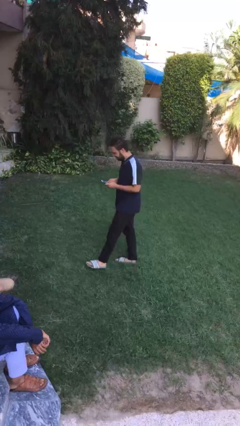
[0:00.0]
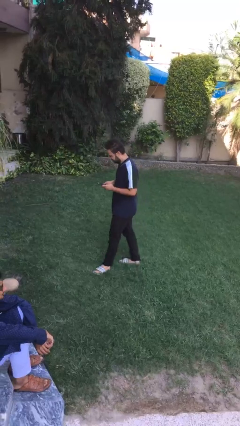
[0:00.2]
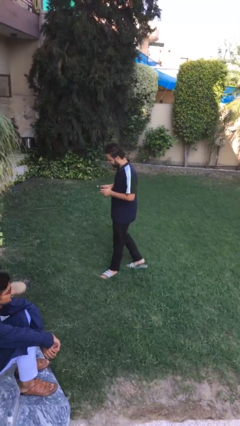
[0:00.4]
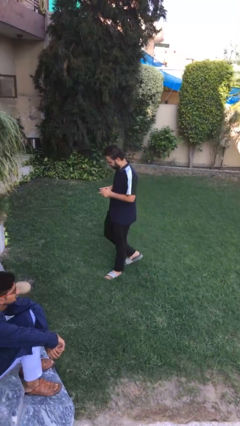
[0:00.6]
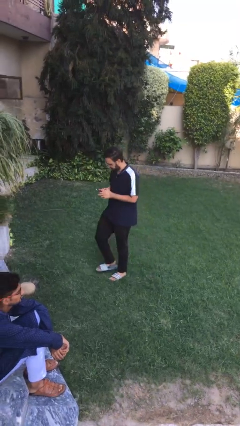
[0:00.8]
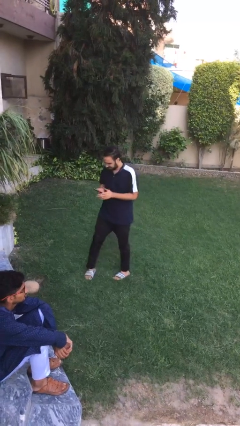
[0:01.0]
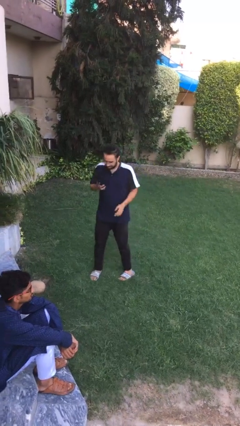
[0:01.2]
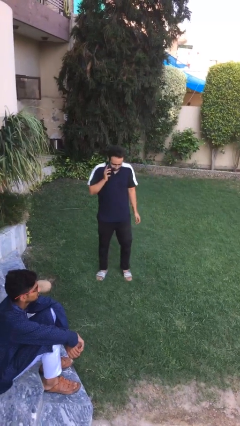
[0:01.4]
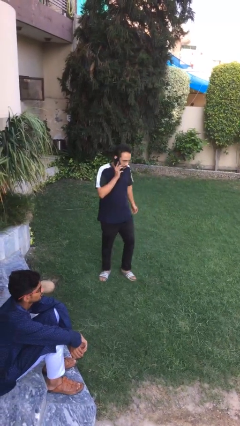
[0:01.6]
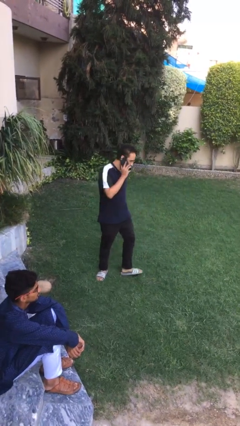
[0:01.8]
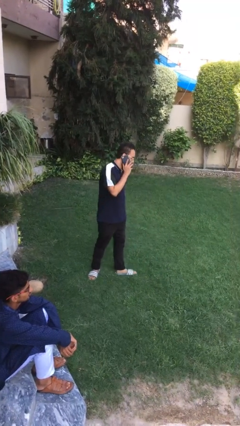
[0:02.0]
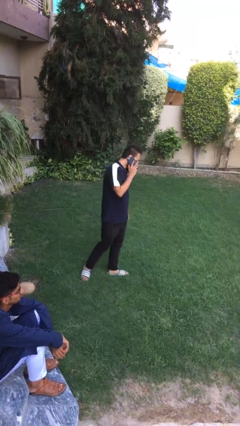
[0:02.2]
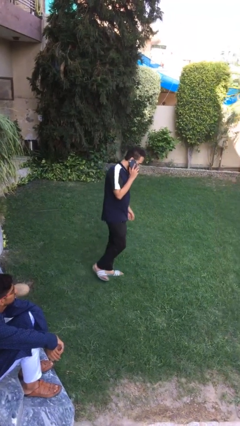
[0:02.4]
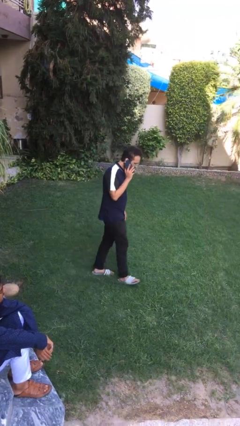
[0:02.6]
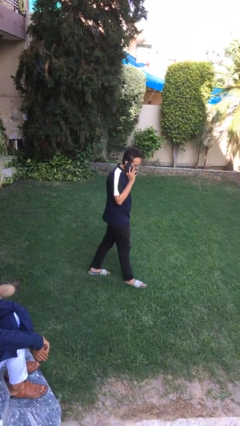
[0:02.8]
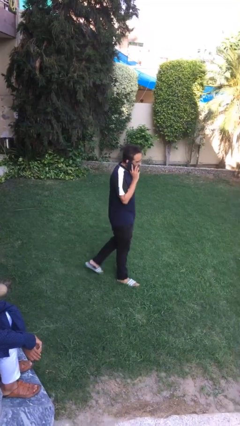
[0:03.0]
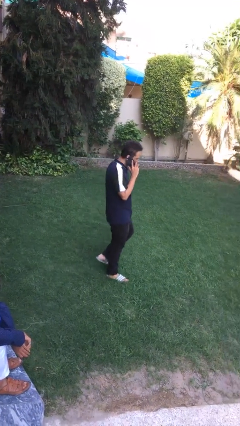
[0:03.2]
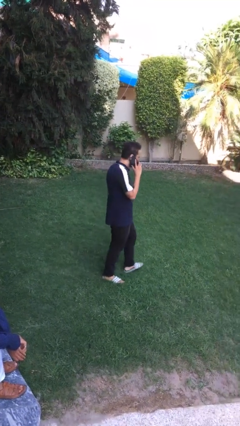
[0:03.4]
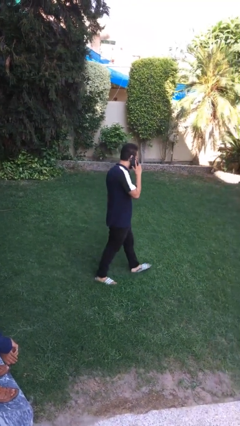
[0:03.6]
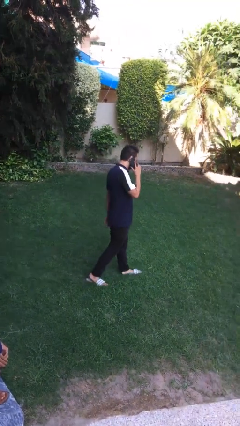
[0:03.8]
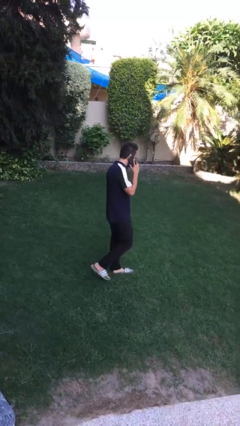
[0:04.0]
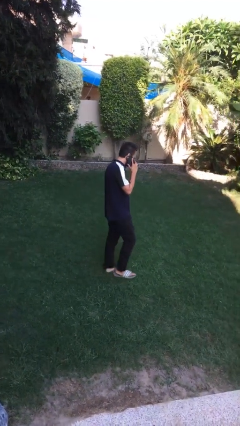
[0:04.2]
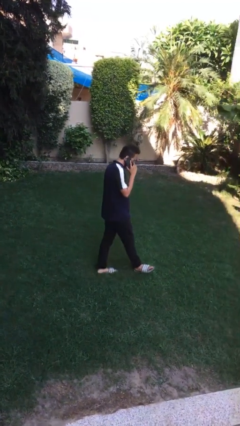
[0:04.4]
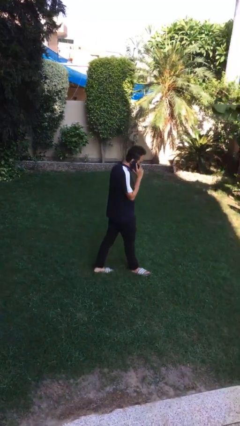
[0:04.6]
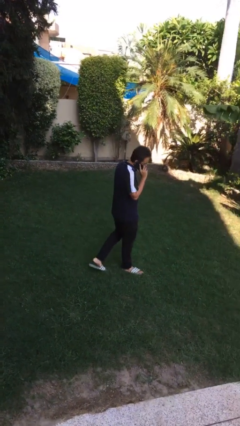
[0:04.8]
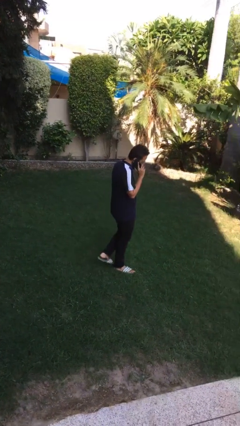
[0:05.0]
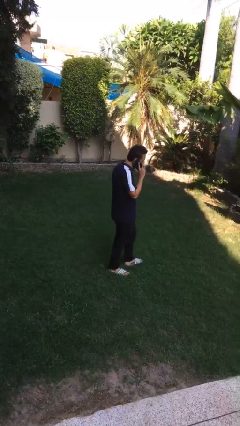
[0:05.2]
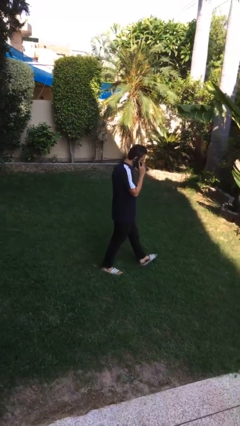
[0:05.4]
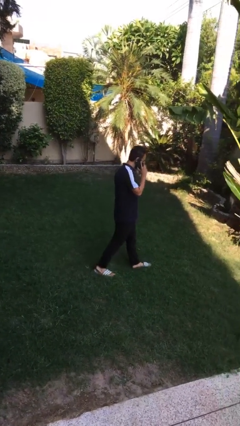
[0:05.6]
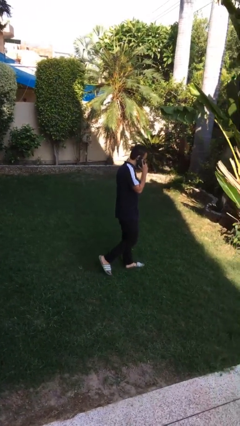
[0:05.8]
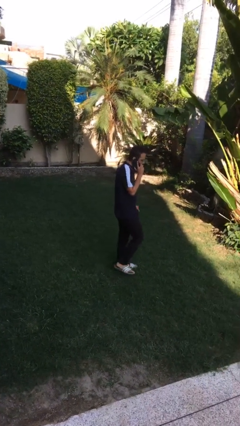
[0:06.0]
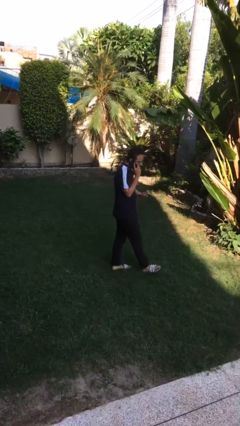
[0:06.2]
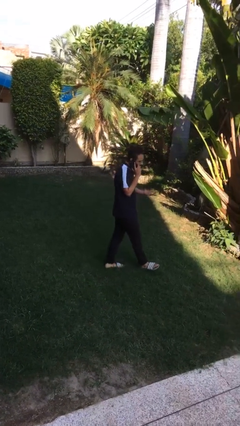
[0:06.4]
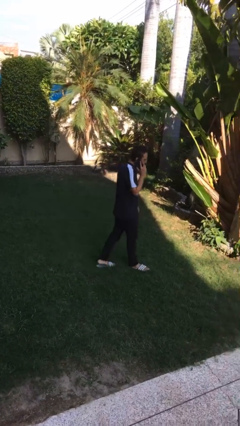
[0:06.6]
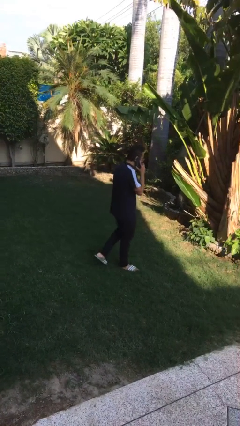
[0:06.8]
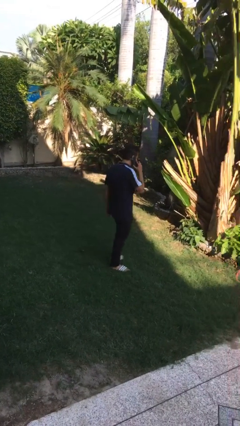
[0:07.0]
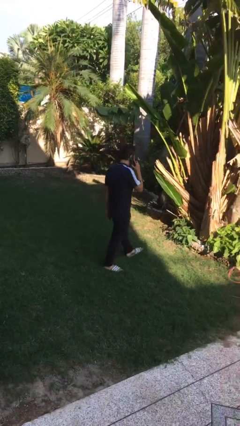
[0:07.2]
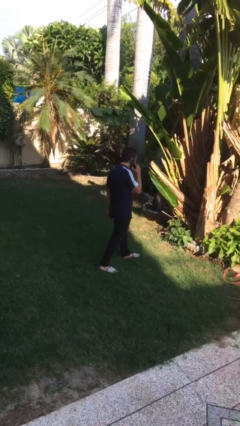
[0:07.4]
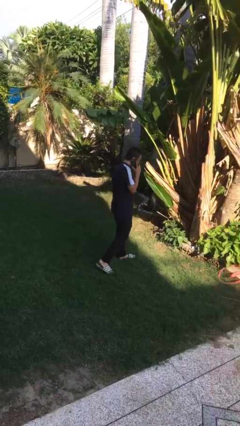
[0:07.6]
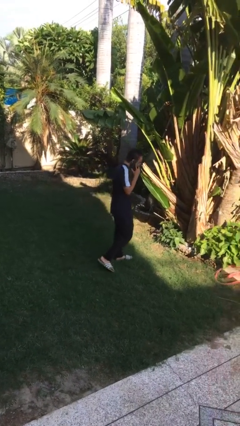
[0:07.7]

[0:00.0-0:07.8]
person talks on phone

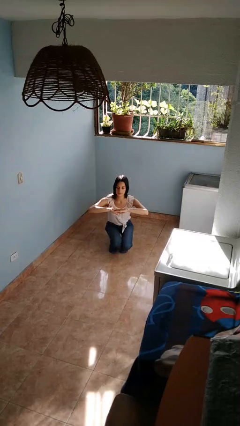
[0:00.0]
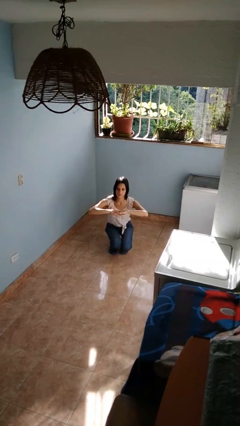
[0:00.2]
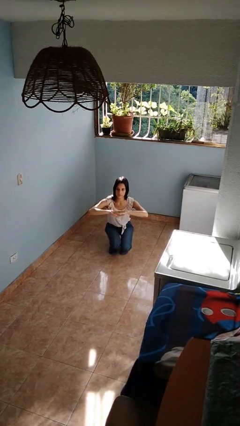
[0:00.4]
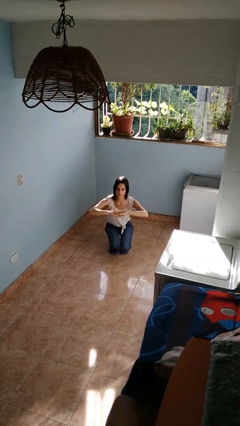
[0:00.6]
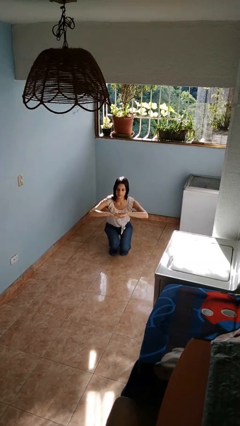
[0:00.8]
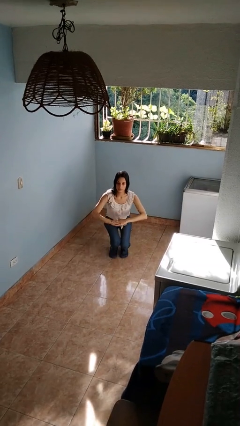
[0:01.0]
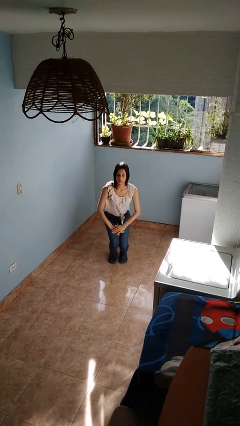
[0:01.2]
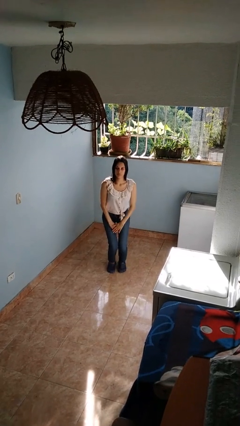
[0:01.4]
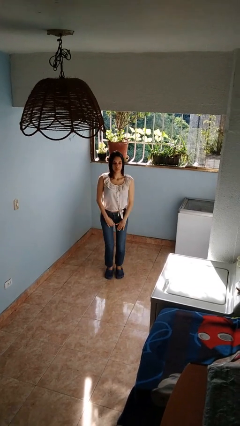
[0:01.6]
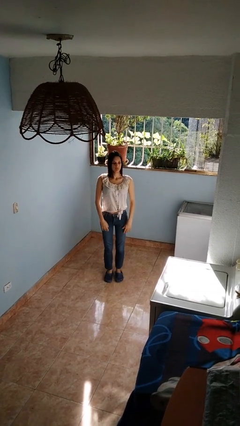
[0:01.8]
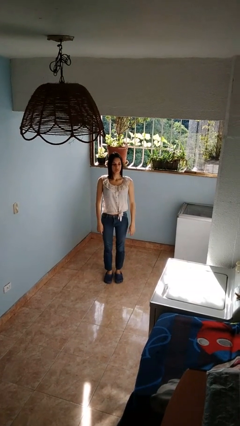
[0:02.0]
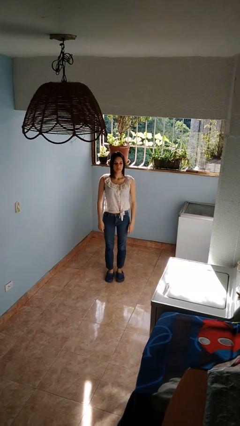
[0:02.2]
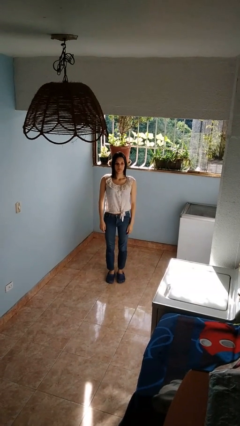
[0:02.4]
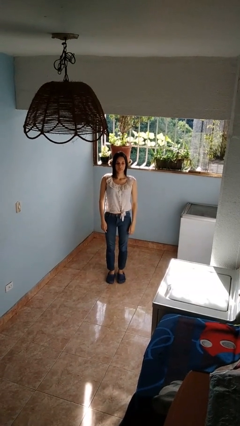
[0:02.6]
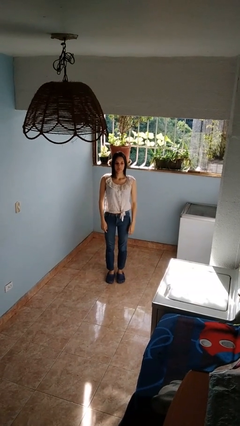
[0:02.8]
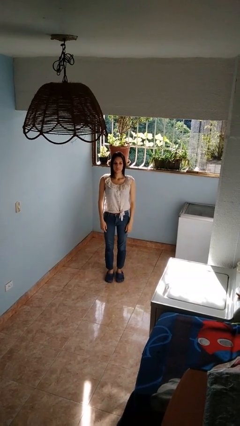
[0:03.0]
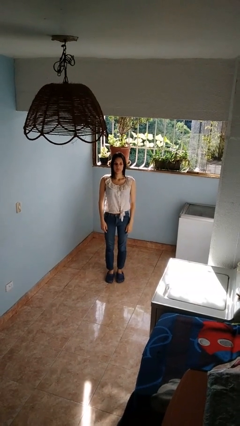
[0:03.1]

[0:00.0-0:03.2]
person stands up

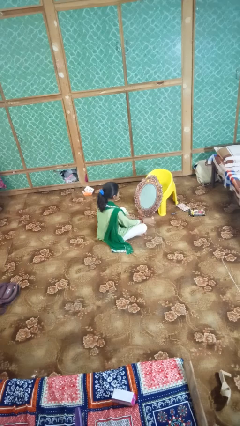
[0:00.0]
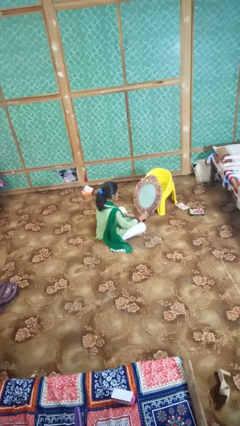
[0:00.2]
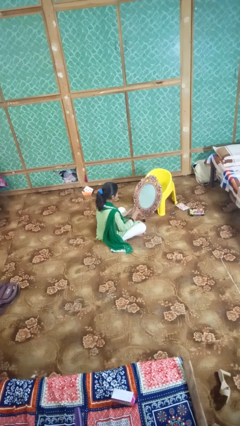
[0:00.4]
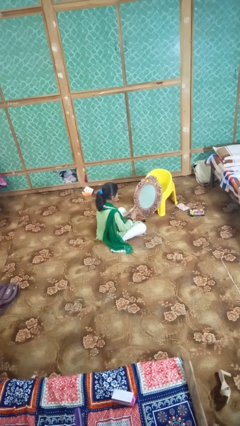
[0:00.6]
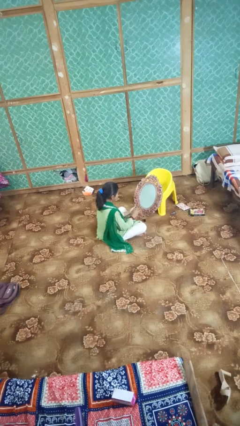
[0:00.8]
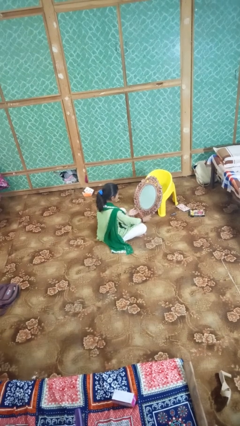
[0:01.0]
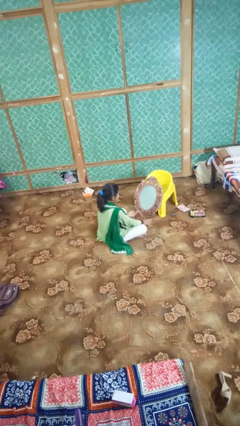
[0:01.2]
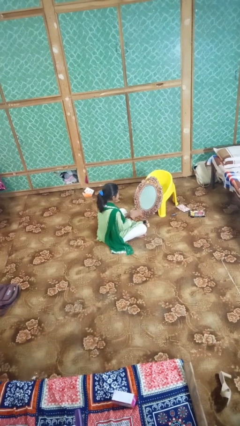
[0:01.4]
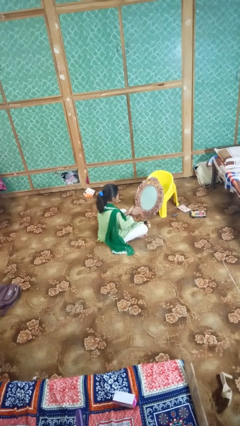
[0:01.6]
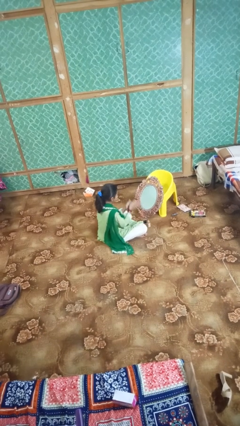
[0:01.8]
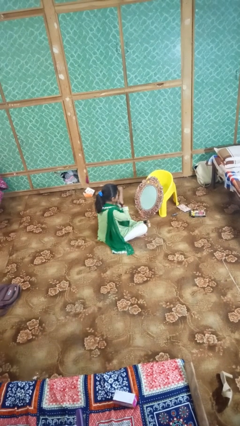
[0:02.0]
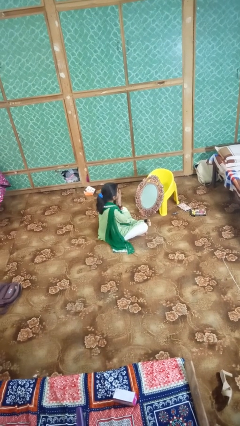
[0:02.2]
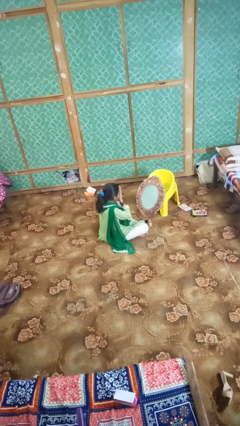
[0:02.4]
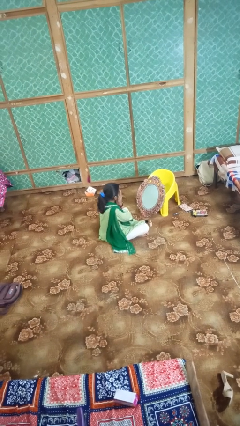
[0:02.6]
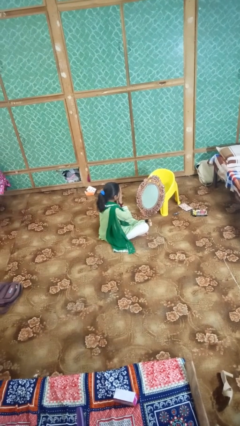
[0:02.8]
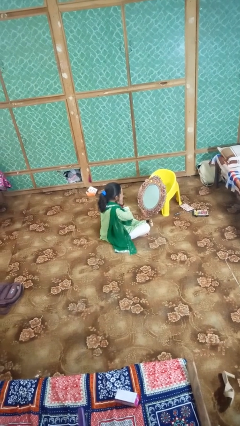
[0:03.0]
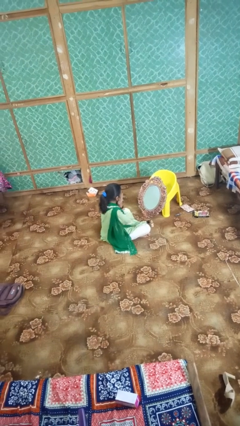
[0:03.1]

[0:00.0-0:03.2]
person applies foundation makeup

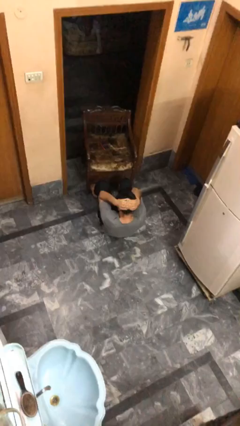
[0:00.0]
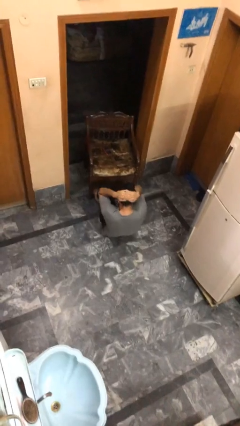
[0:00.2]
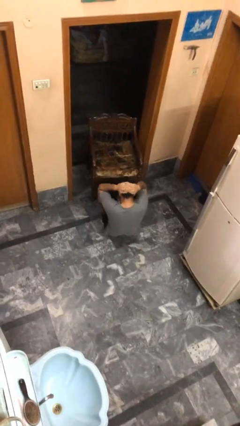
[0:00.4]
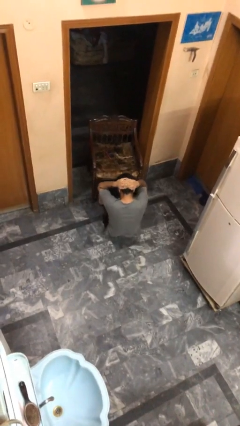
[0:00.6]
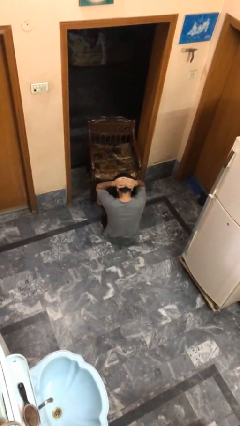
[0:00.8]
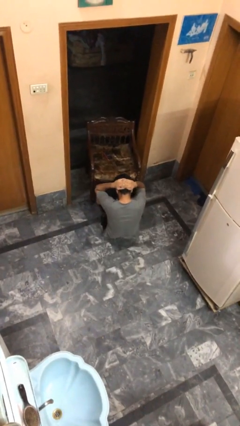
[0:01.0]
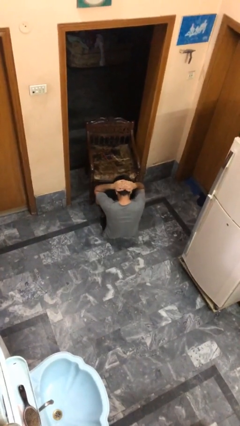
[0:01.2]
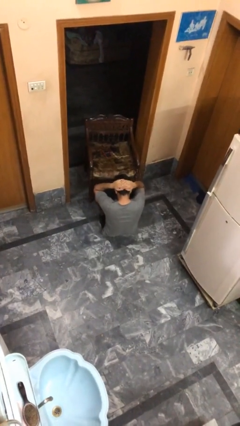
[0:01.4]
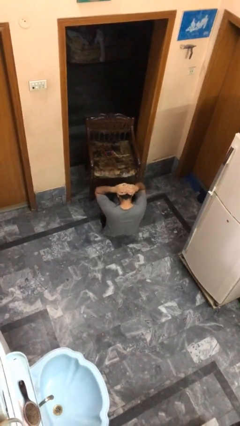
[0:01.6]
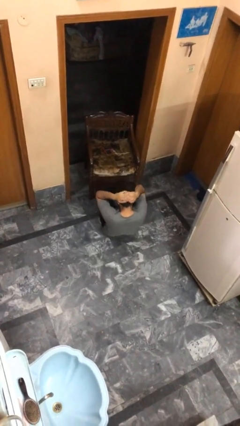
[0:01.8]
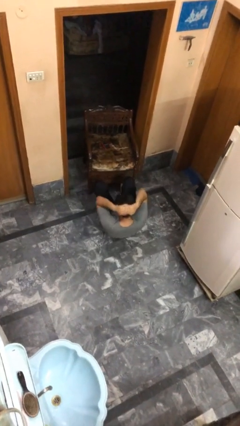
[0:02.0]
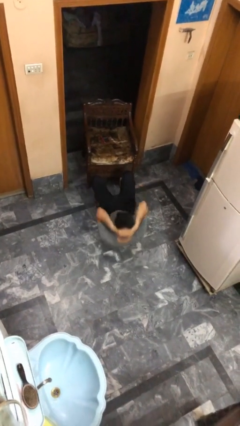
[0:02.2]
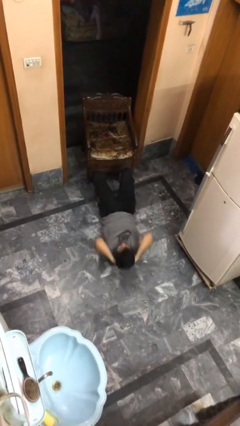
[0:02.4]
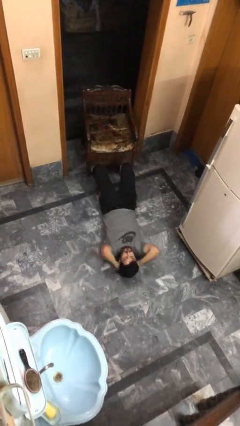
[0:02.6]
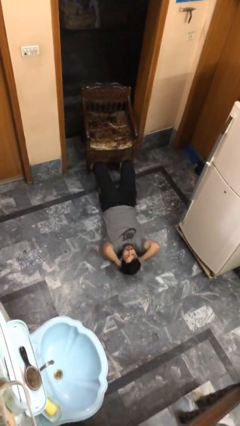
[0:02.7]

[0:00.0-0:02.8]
person exercises with situp

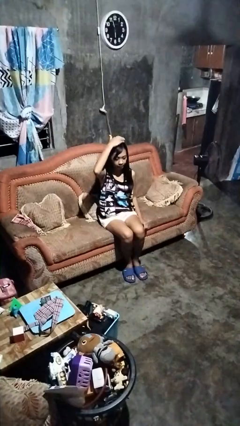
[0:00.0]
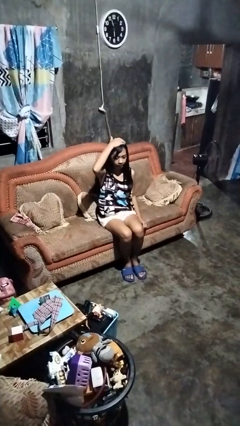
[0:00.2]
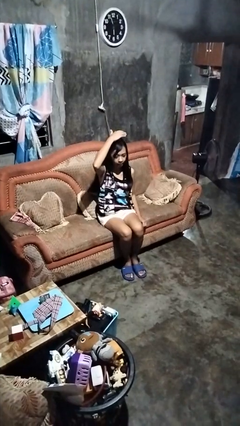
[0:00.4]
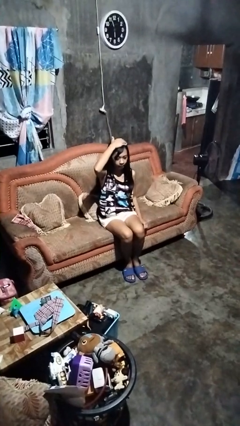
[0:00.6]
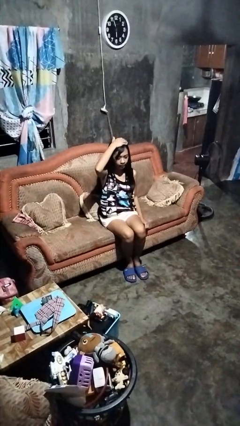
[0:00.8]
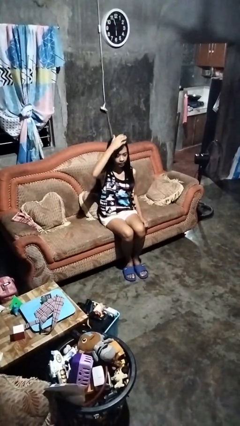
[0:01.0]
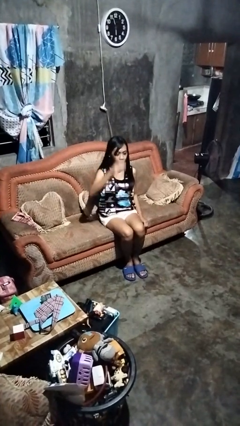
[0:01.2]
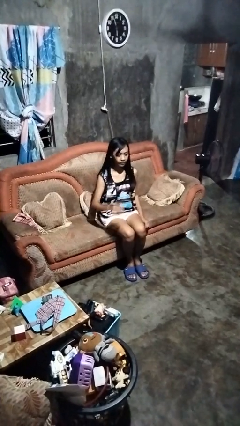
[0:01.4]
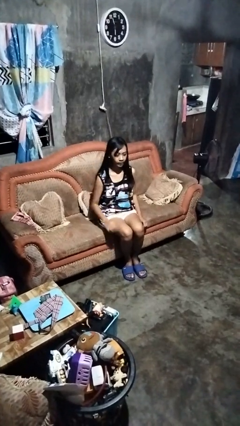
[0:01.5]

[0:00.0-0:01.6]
person pats head
